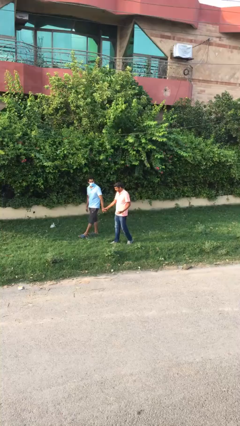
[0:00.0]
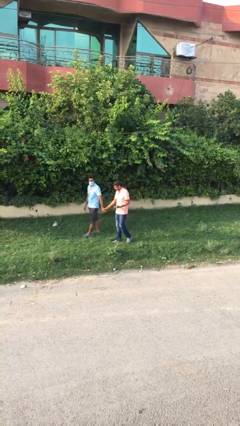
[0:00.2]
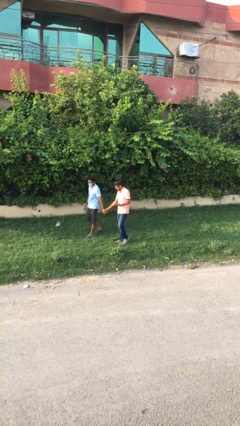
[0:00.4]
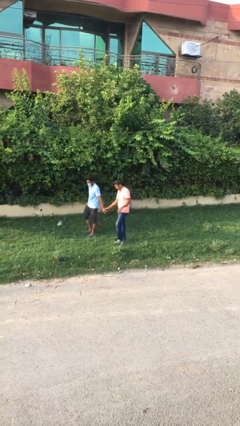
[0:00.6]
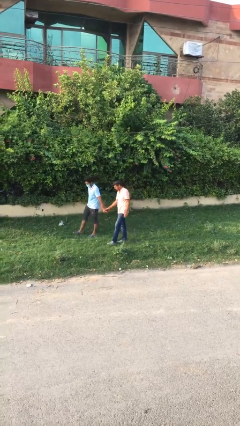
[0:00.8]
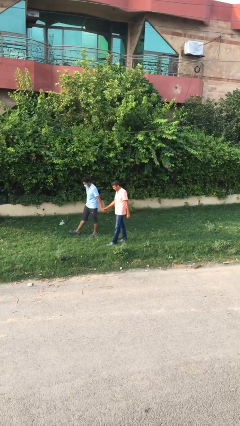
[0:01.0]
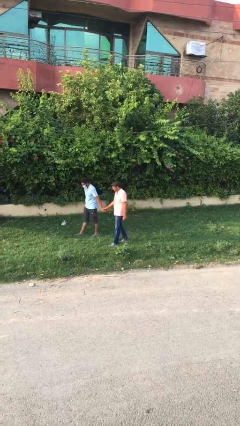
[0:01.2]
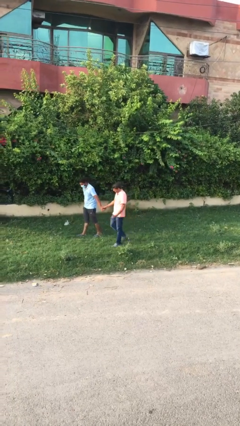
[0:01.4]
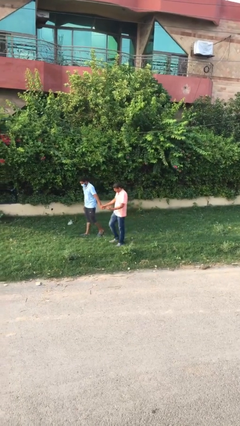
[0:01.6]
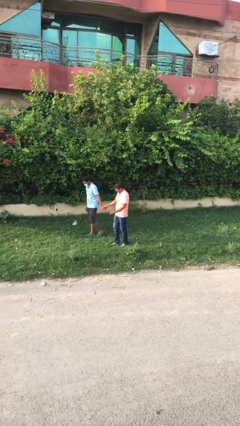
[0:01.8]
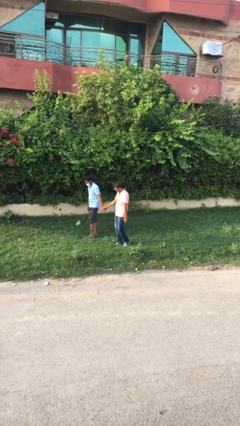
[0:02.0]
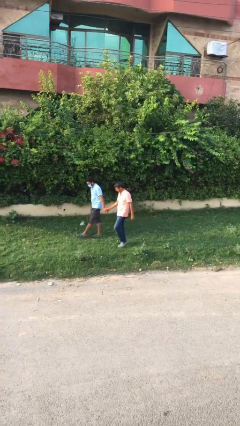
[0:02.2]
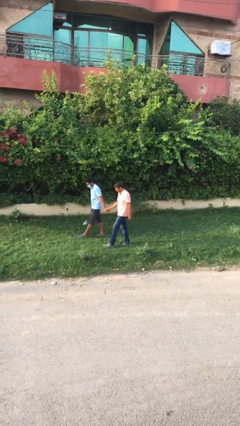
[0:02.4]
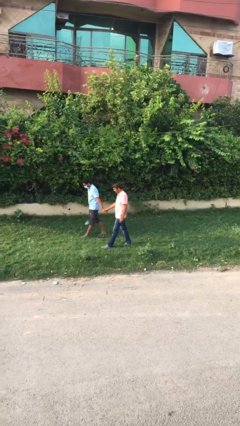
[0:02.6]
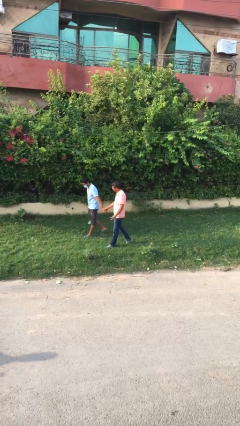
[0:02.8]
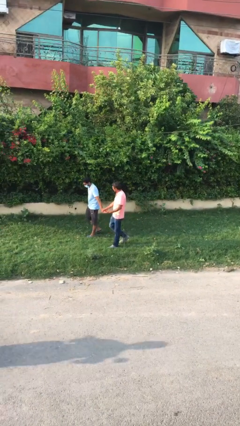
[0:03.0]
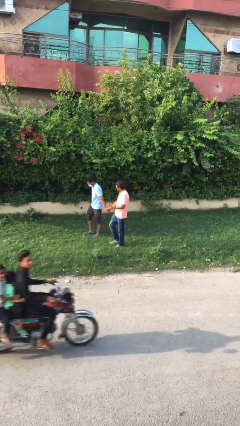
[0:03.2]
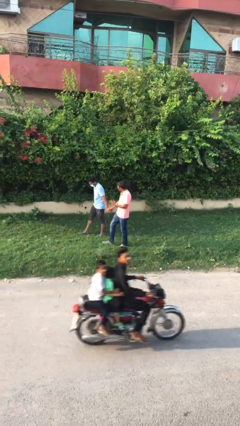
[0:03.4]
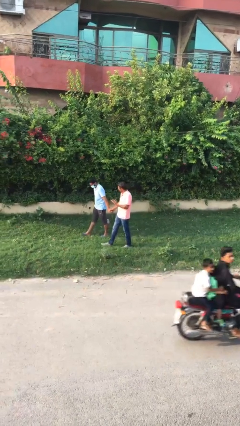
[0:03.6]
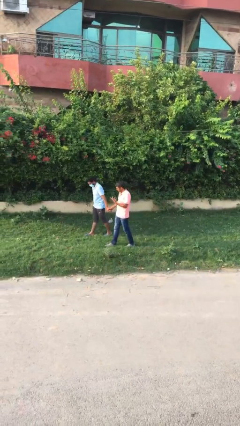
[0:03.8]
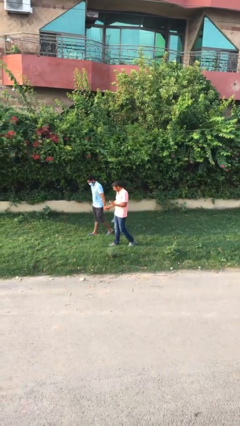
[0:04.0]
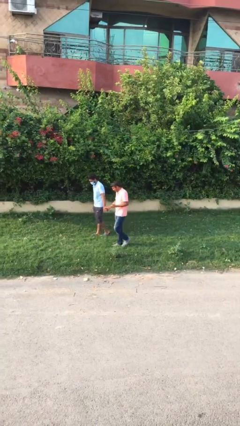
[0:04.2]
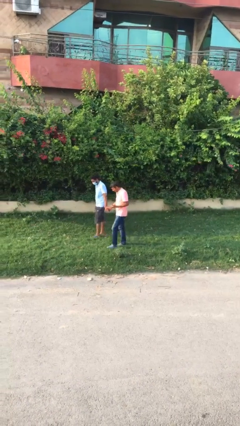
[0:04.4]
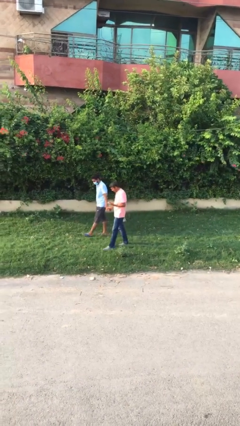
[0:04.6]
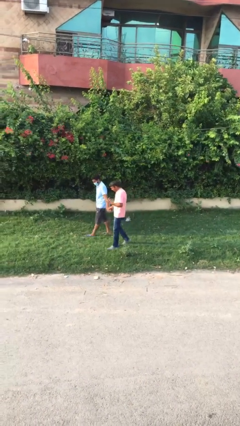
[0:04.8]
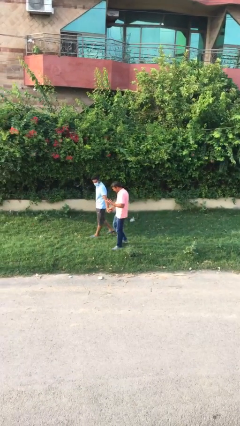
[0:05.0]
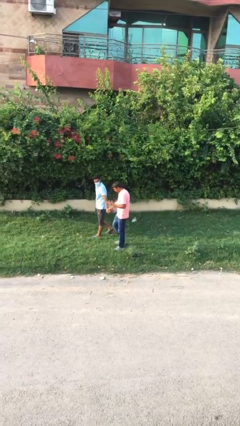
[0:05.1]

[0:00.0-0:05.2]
person holds hand

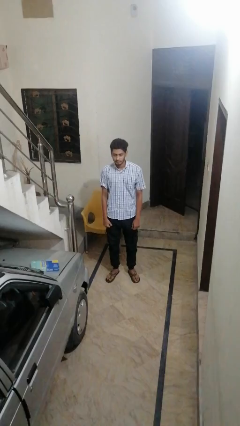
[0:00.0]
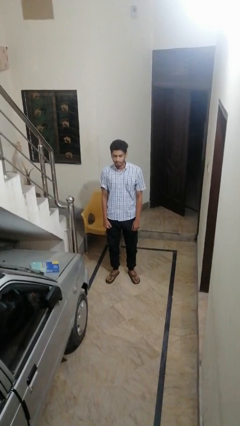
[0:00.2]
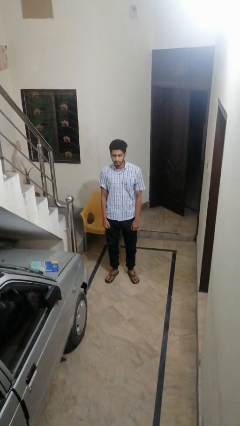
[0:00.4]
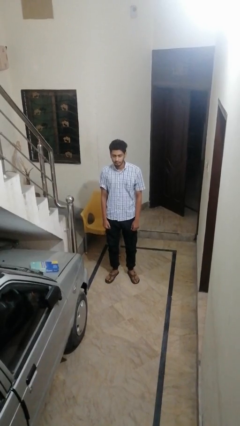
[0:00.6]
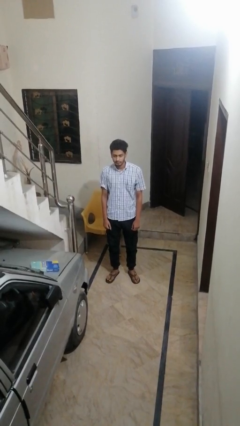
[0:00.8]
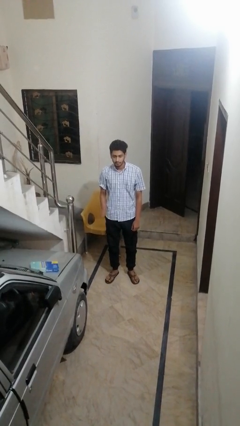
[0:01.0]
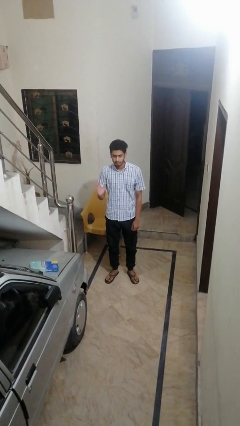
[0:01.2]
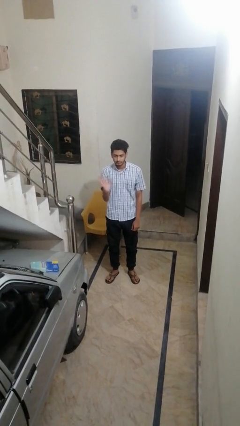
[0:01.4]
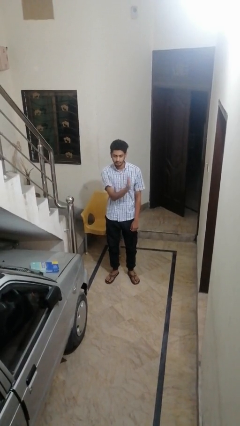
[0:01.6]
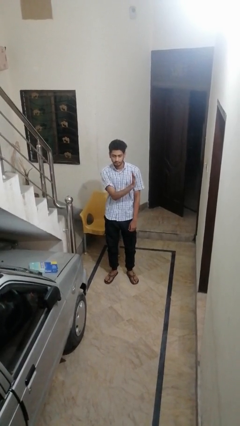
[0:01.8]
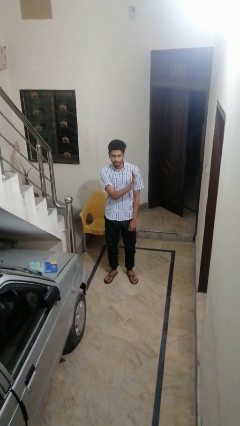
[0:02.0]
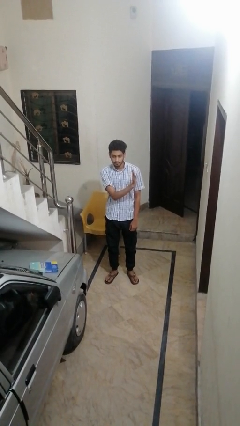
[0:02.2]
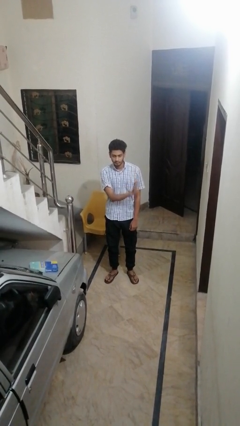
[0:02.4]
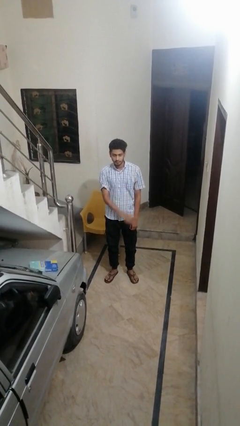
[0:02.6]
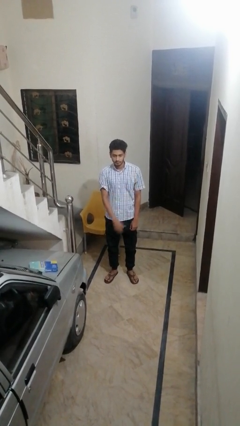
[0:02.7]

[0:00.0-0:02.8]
person gestures swipe left

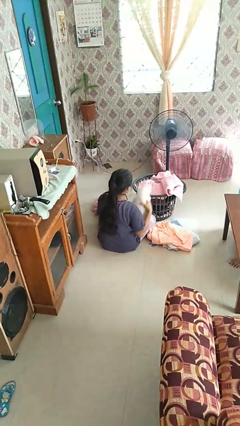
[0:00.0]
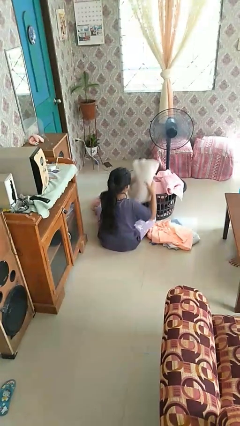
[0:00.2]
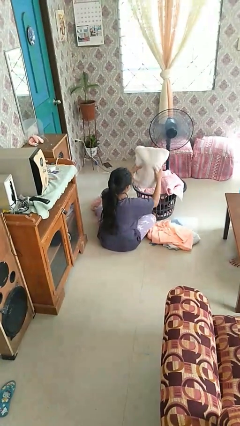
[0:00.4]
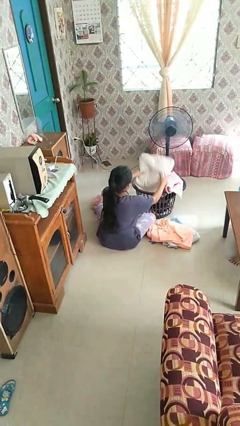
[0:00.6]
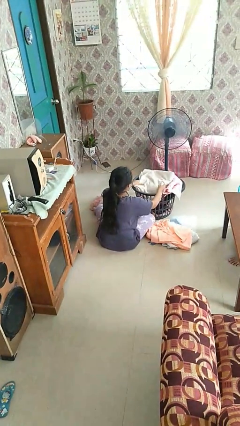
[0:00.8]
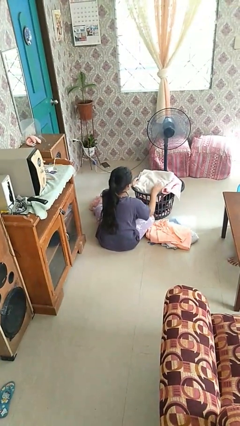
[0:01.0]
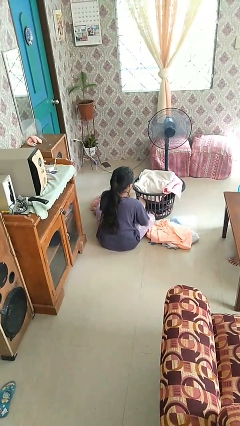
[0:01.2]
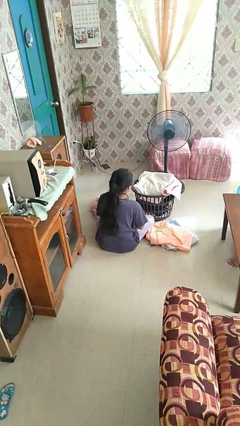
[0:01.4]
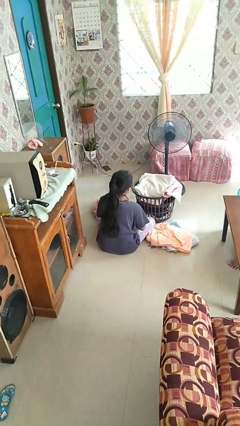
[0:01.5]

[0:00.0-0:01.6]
person puts object into basket

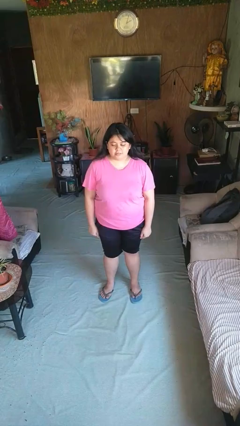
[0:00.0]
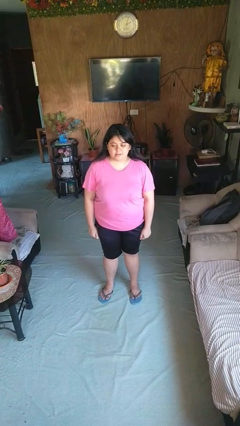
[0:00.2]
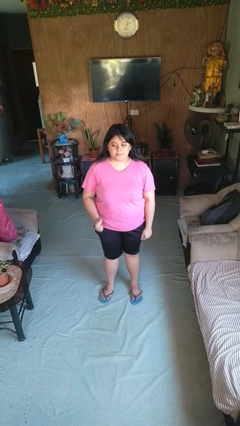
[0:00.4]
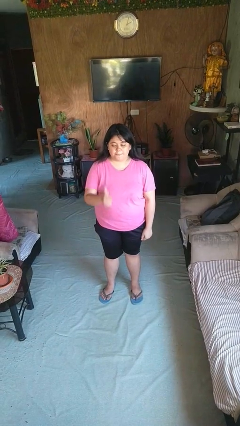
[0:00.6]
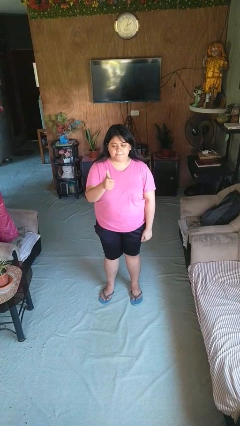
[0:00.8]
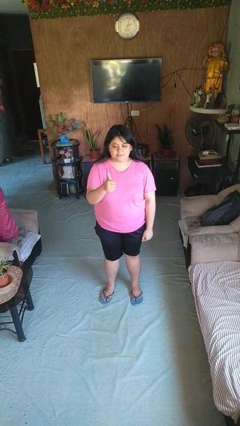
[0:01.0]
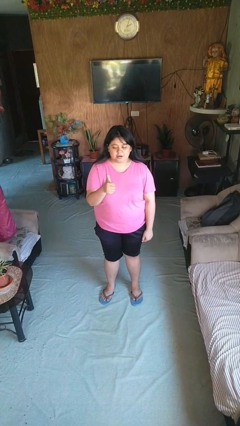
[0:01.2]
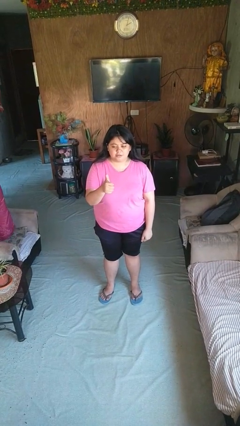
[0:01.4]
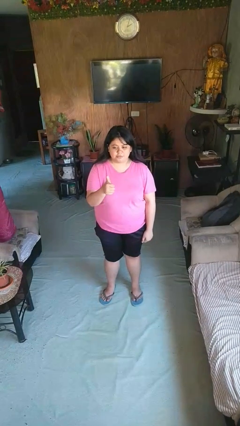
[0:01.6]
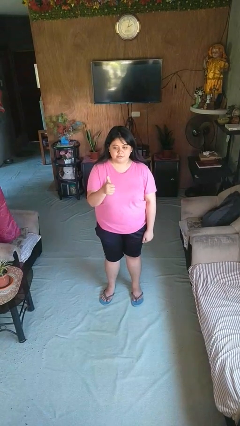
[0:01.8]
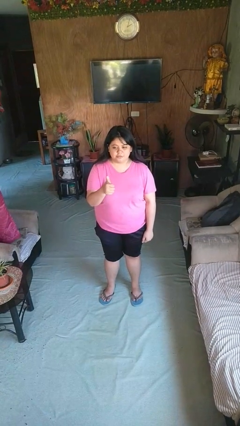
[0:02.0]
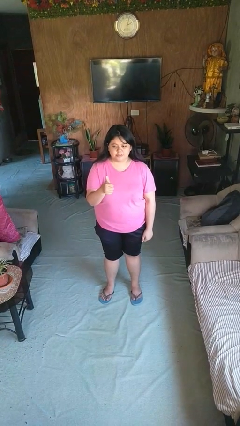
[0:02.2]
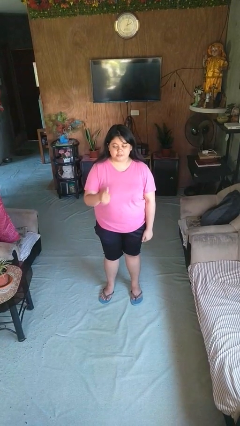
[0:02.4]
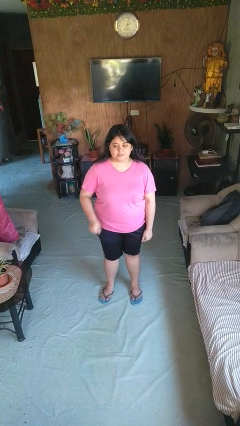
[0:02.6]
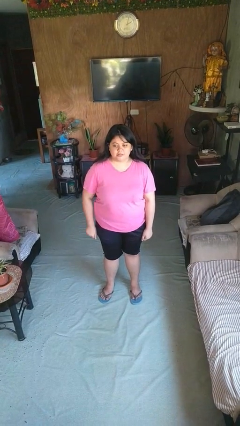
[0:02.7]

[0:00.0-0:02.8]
person gestures thumbs up

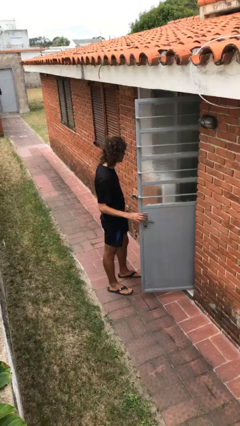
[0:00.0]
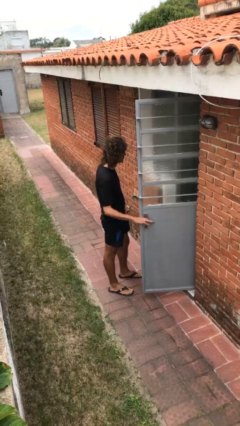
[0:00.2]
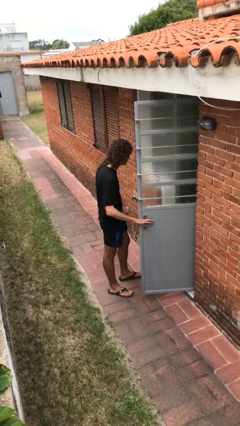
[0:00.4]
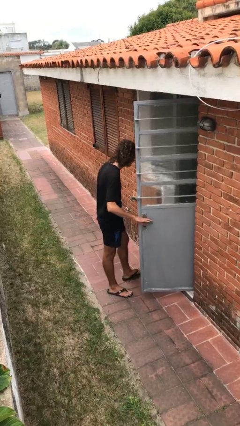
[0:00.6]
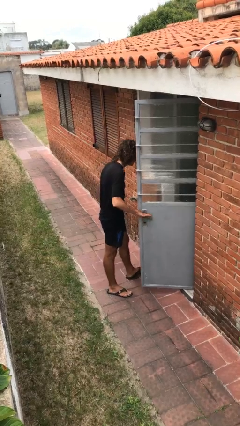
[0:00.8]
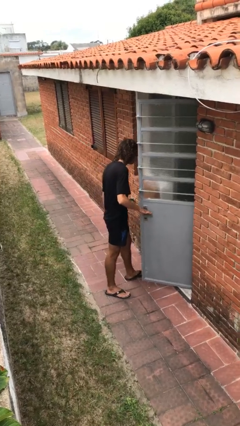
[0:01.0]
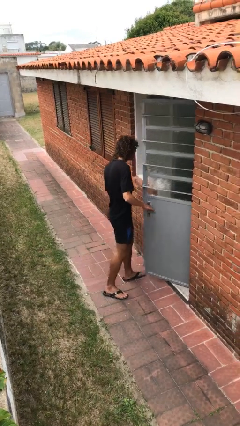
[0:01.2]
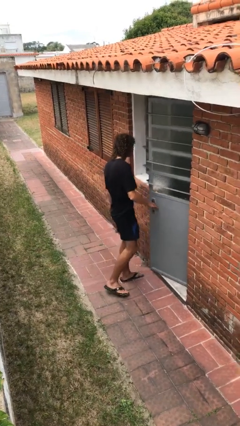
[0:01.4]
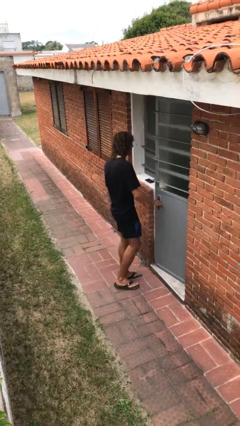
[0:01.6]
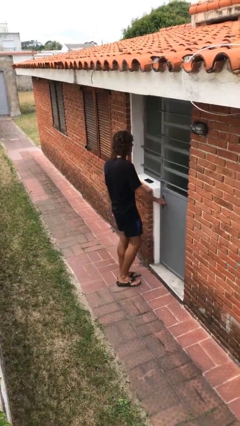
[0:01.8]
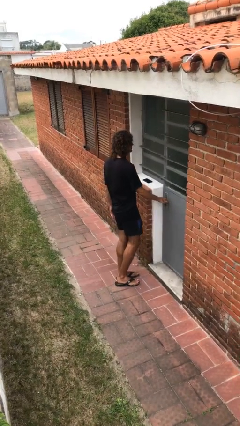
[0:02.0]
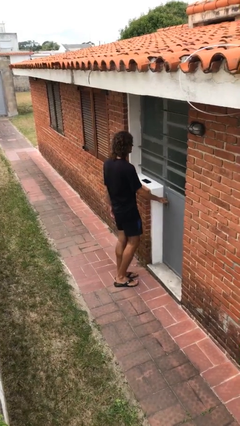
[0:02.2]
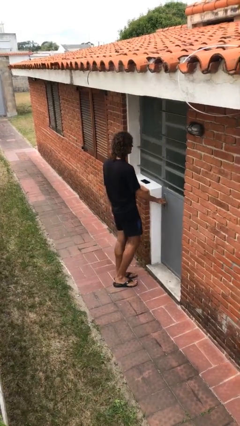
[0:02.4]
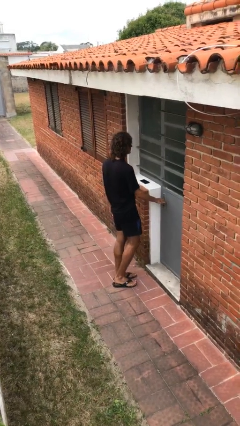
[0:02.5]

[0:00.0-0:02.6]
person closes facility door

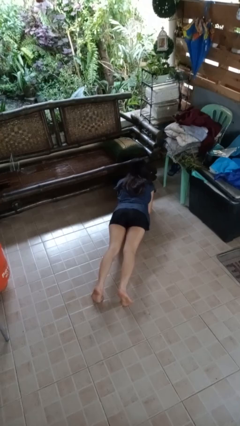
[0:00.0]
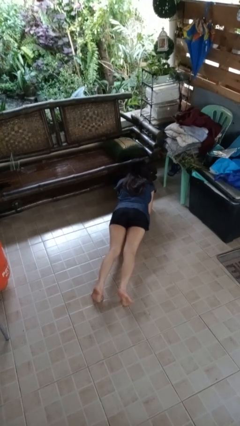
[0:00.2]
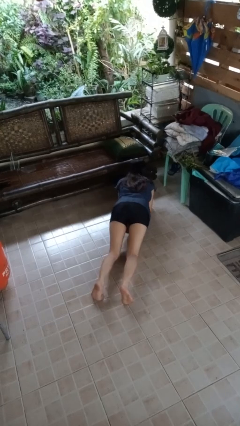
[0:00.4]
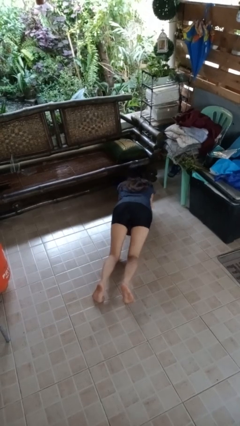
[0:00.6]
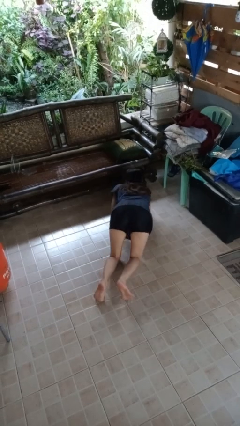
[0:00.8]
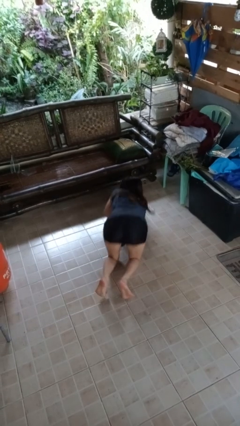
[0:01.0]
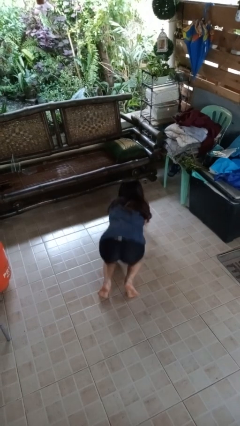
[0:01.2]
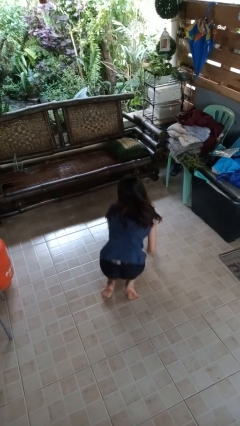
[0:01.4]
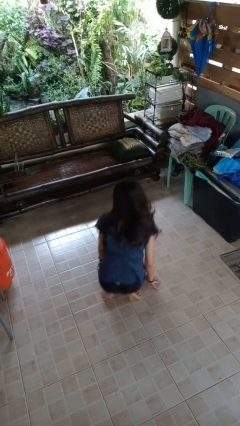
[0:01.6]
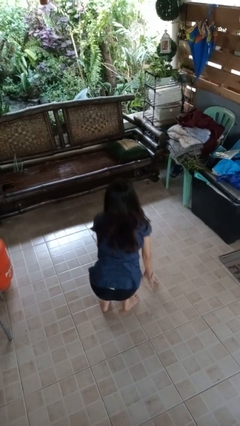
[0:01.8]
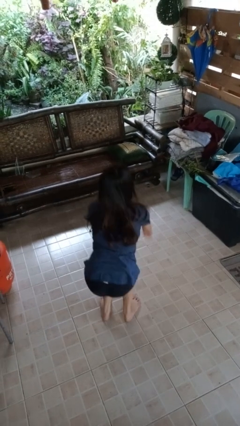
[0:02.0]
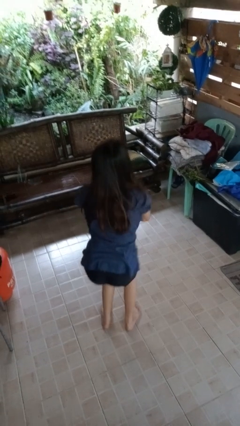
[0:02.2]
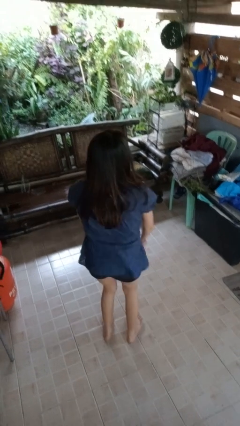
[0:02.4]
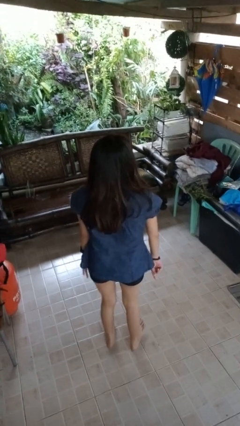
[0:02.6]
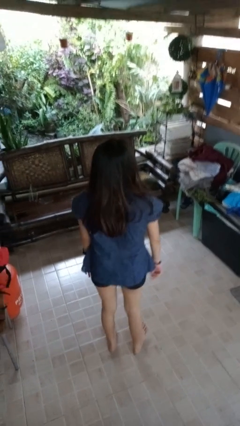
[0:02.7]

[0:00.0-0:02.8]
person stands up from floor
